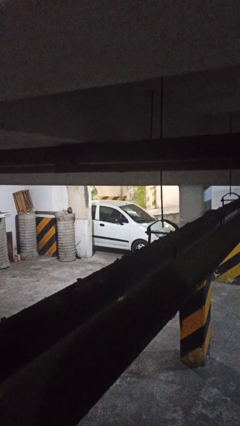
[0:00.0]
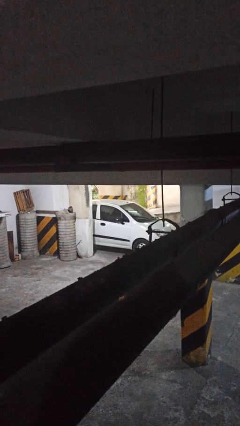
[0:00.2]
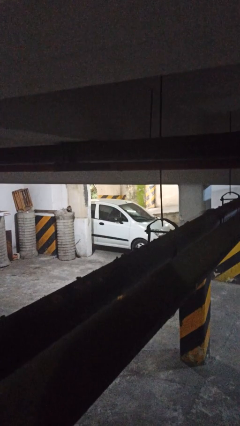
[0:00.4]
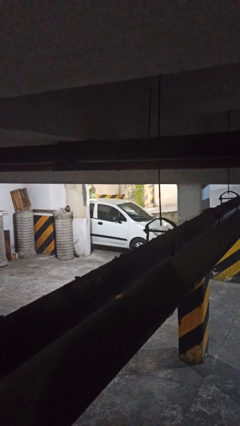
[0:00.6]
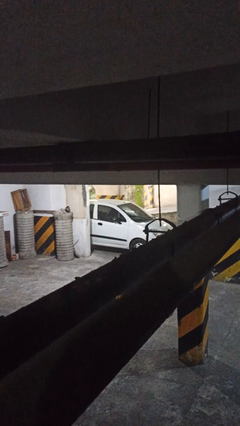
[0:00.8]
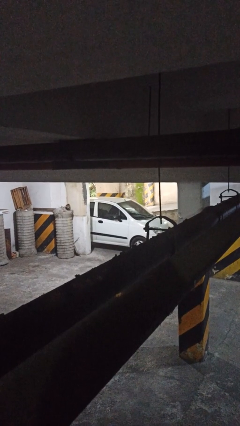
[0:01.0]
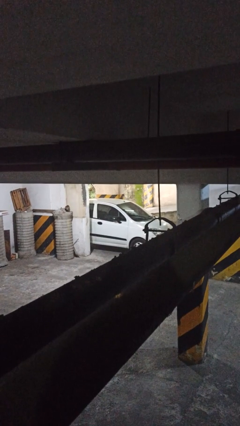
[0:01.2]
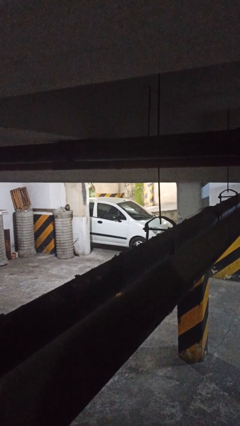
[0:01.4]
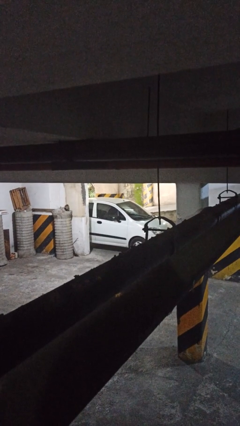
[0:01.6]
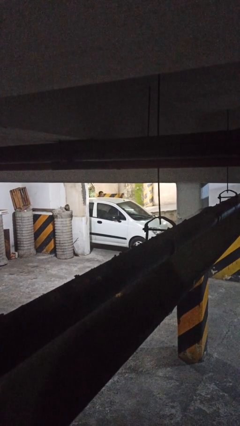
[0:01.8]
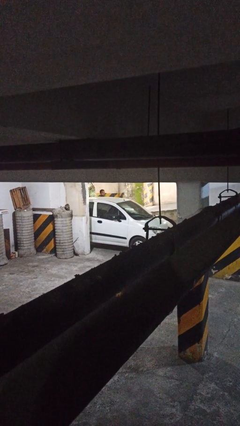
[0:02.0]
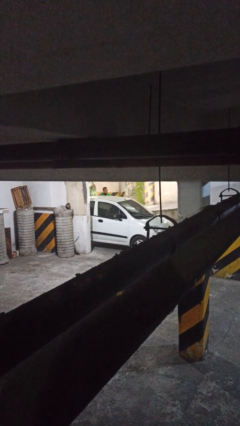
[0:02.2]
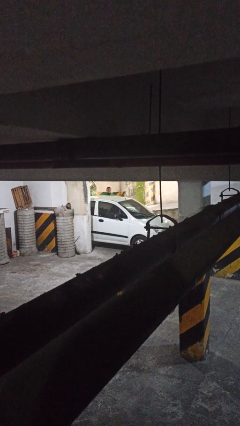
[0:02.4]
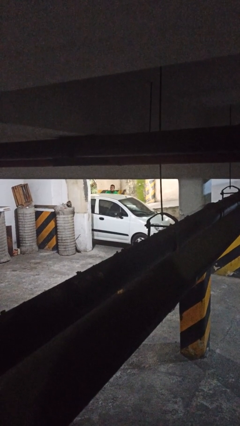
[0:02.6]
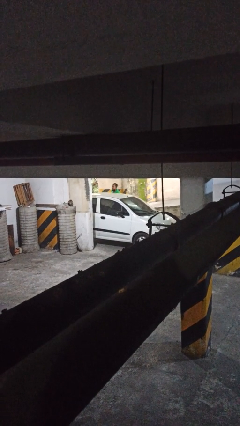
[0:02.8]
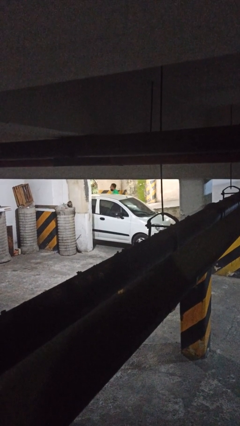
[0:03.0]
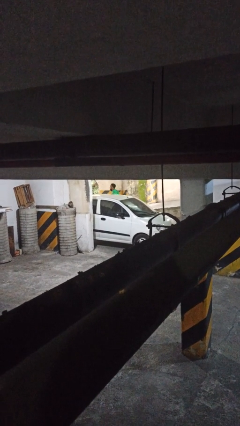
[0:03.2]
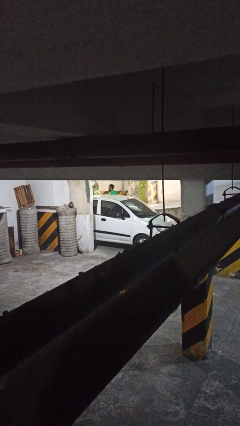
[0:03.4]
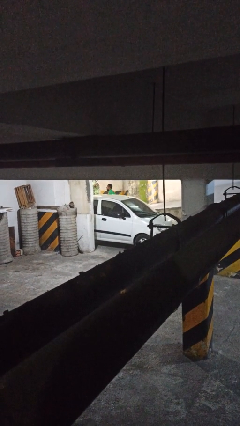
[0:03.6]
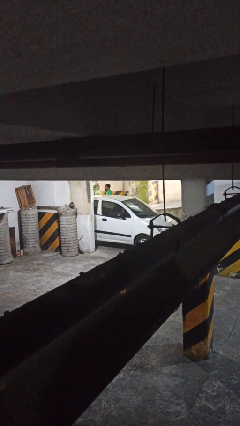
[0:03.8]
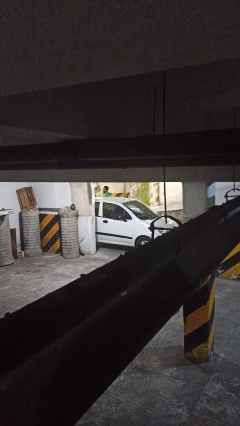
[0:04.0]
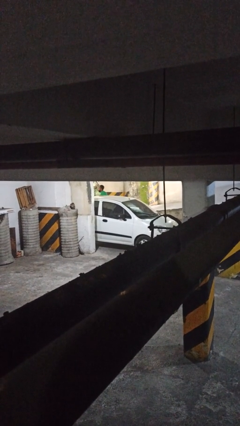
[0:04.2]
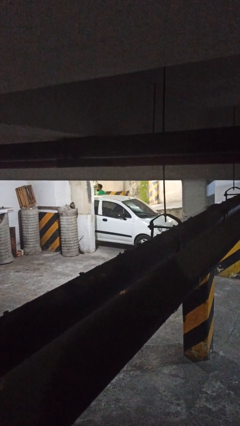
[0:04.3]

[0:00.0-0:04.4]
car drops off person

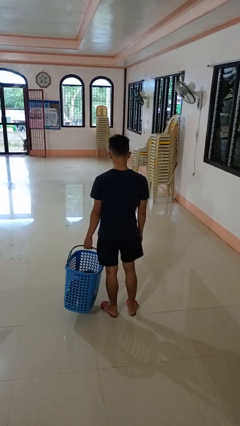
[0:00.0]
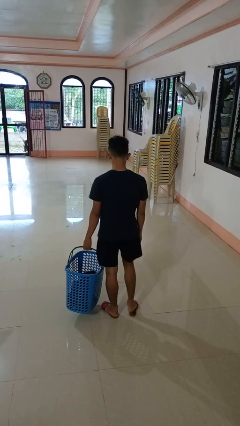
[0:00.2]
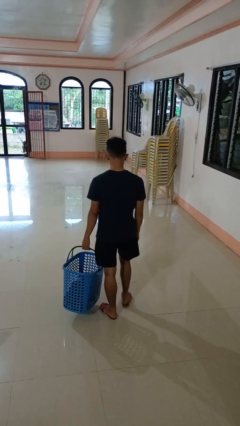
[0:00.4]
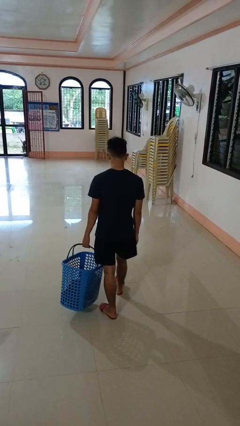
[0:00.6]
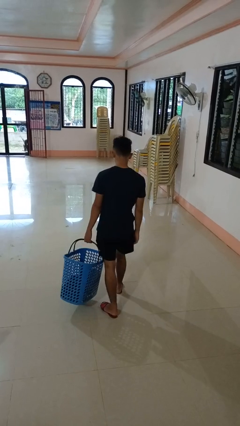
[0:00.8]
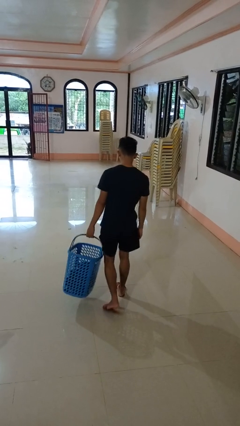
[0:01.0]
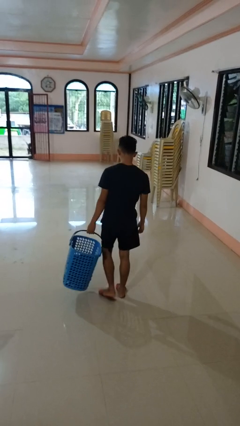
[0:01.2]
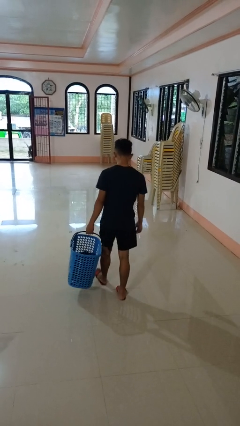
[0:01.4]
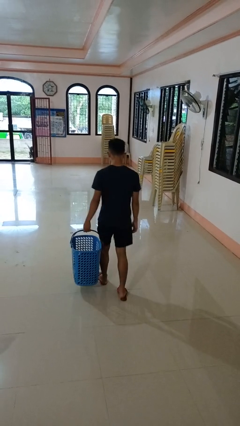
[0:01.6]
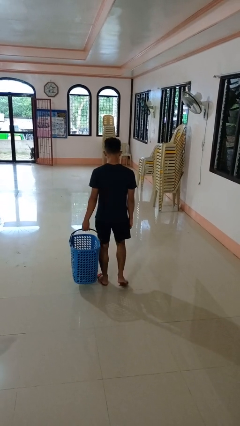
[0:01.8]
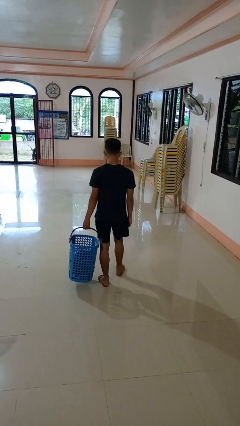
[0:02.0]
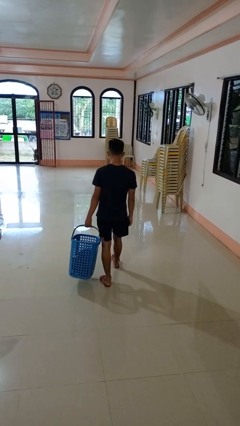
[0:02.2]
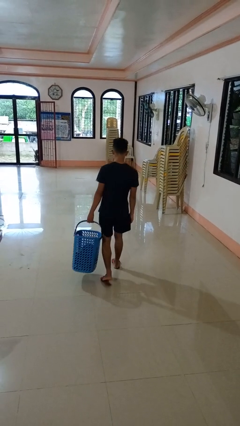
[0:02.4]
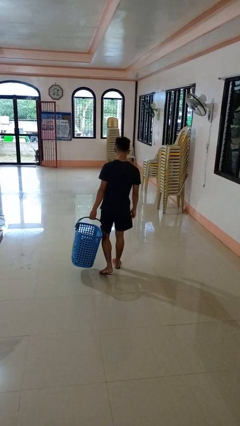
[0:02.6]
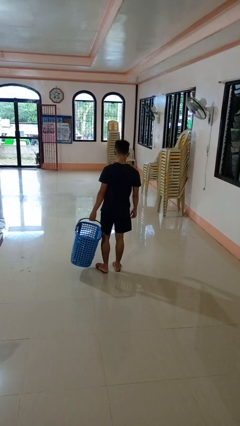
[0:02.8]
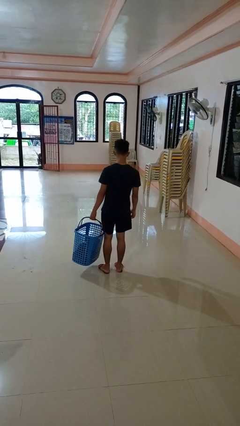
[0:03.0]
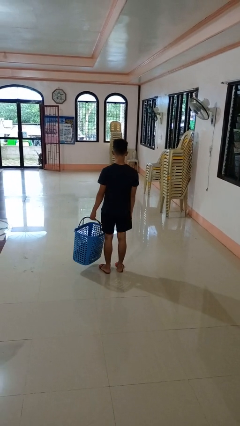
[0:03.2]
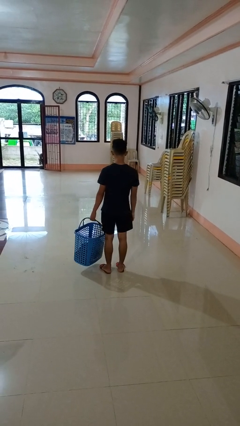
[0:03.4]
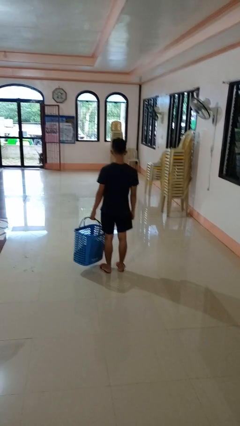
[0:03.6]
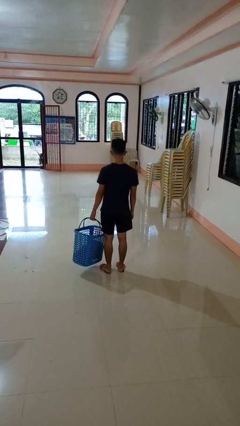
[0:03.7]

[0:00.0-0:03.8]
person carries laundry basket

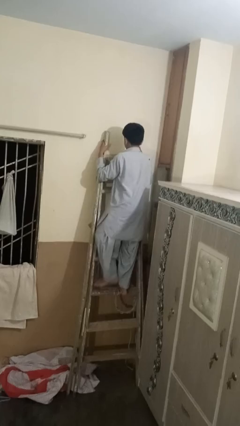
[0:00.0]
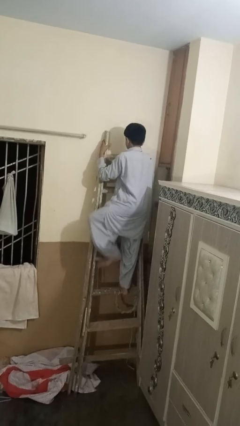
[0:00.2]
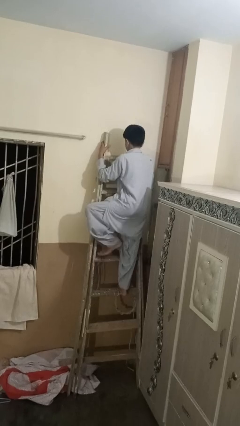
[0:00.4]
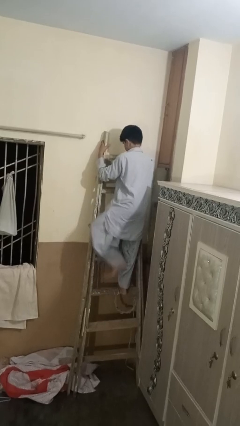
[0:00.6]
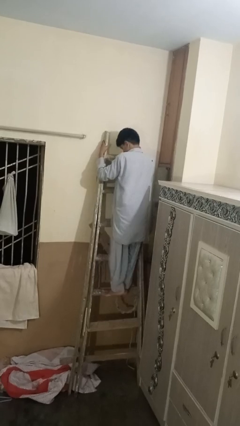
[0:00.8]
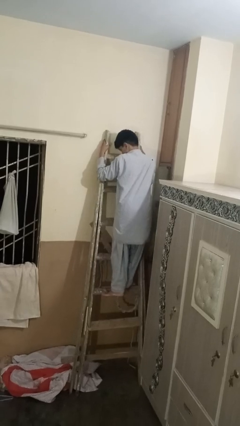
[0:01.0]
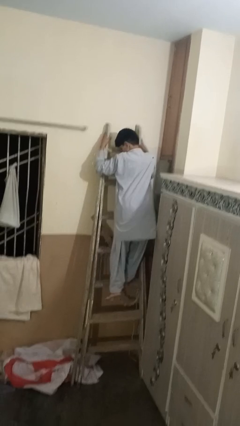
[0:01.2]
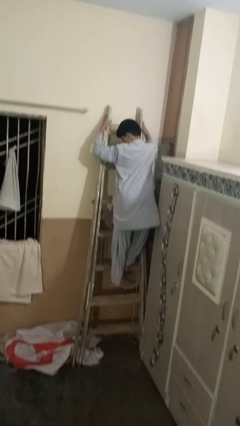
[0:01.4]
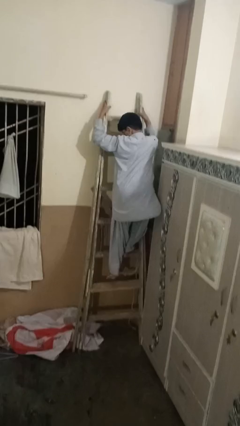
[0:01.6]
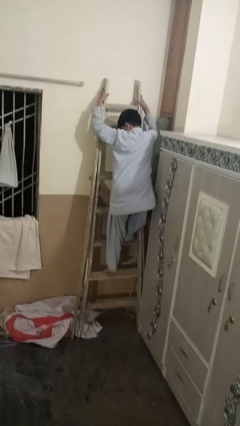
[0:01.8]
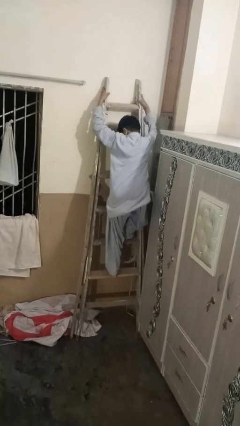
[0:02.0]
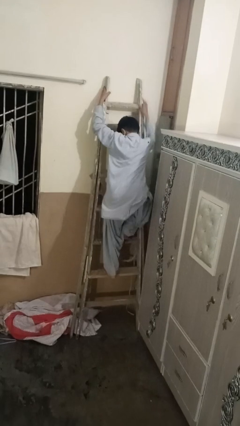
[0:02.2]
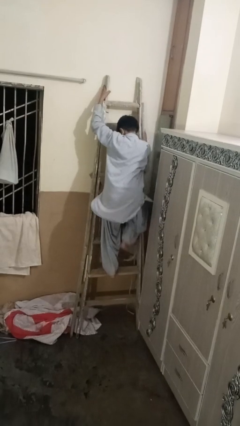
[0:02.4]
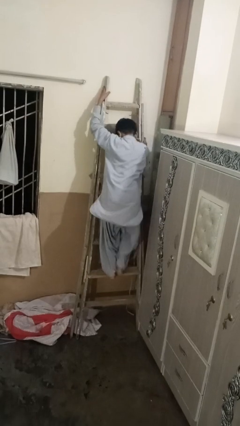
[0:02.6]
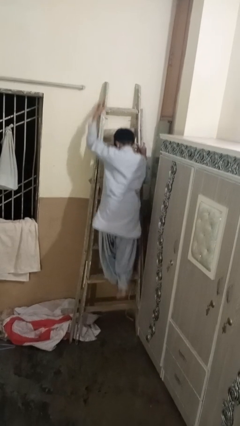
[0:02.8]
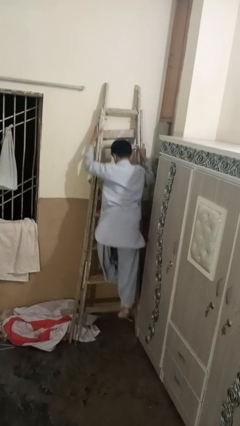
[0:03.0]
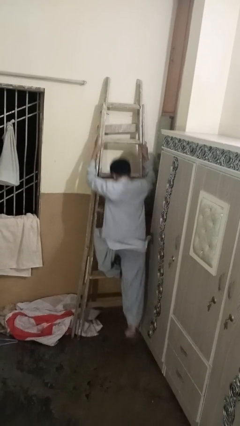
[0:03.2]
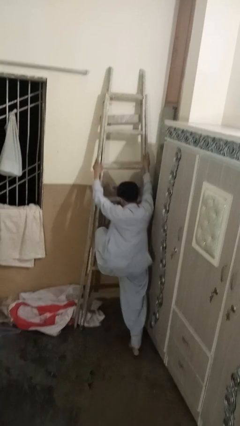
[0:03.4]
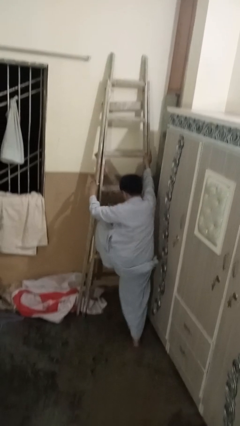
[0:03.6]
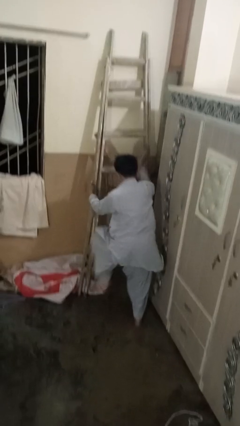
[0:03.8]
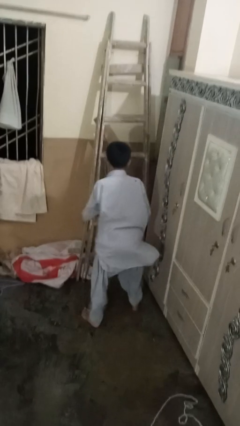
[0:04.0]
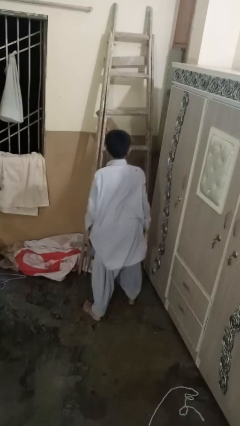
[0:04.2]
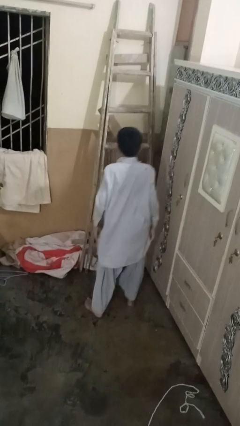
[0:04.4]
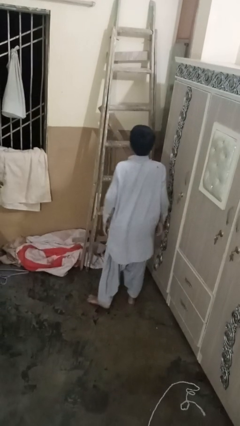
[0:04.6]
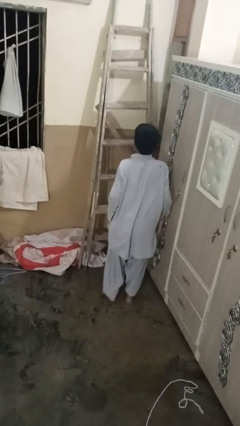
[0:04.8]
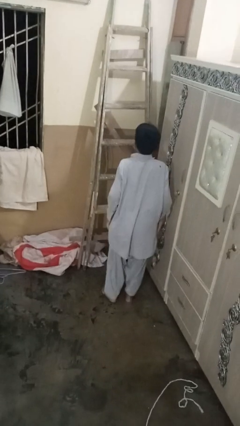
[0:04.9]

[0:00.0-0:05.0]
person climbs down ladder

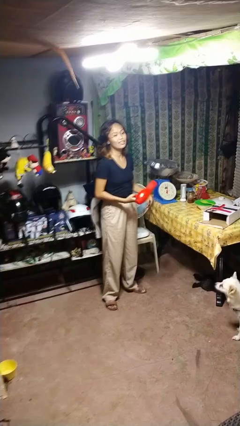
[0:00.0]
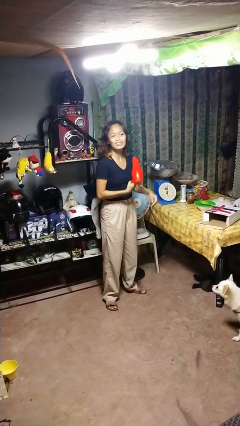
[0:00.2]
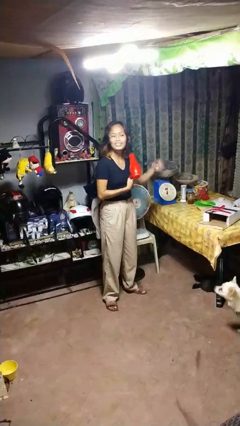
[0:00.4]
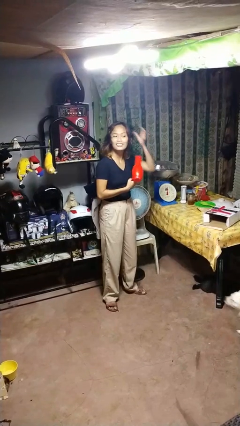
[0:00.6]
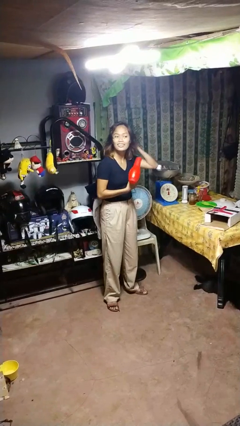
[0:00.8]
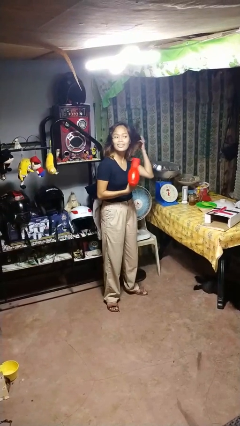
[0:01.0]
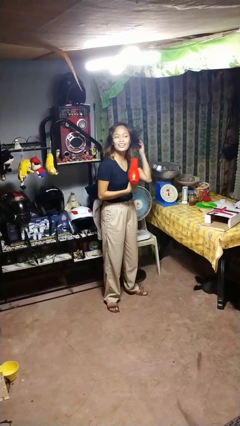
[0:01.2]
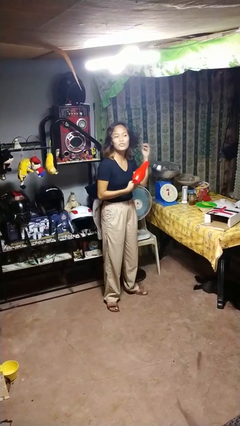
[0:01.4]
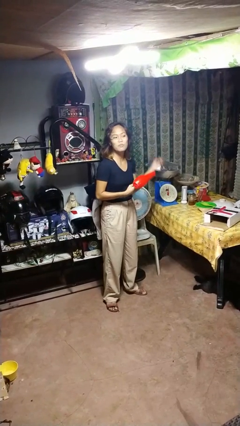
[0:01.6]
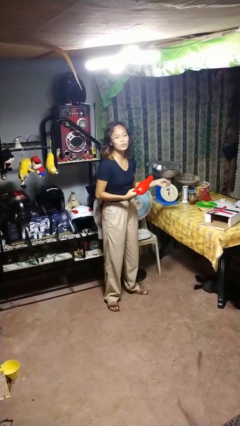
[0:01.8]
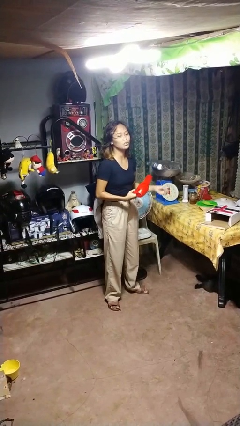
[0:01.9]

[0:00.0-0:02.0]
person dries hair with hairdryer

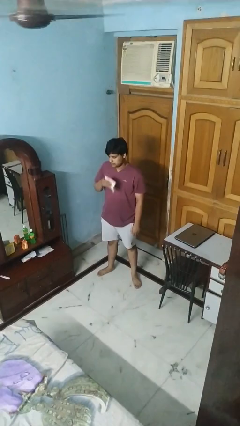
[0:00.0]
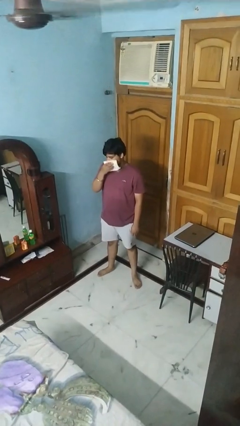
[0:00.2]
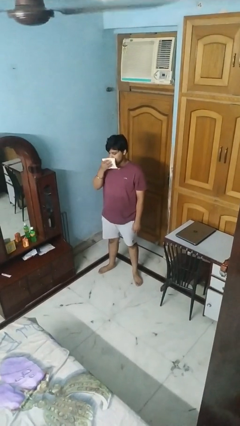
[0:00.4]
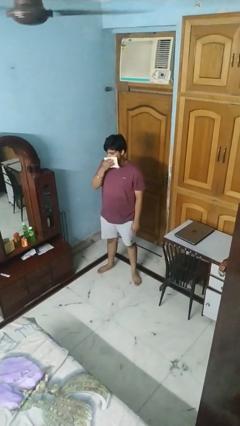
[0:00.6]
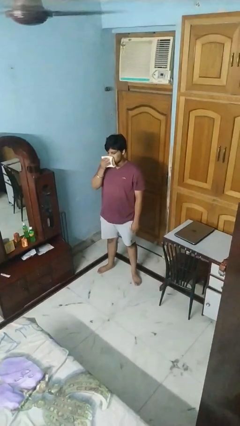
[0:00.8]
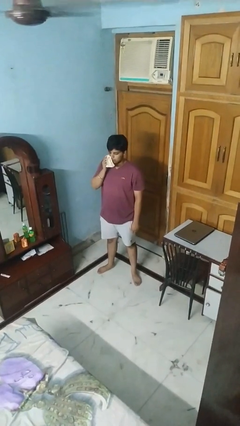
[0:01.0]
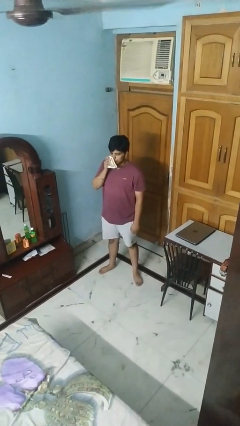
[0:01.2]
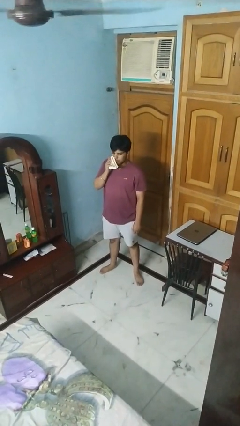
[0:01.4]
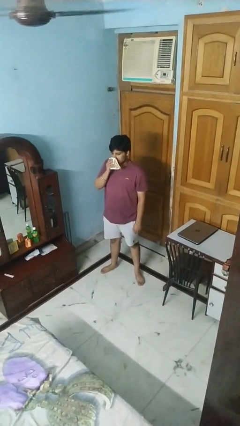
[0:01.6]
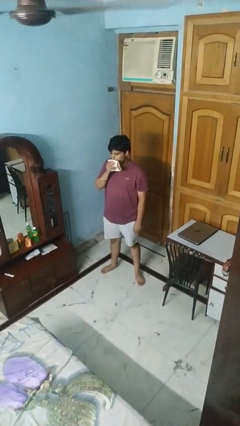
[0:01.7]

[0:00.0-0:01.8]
person wipes mouth with napkin
